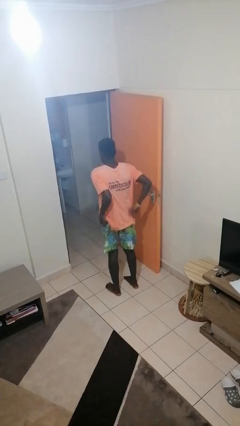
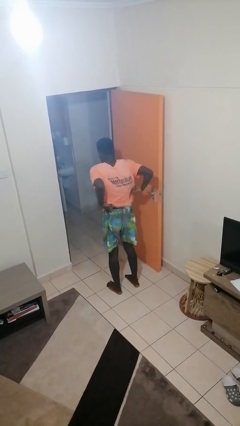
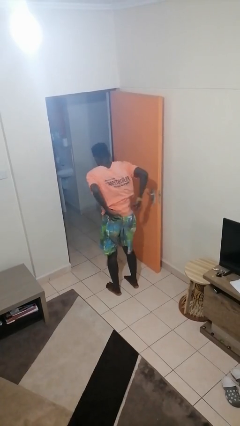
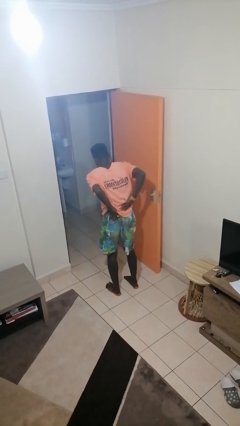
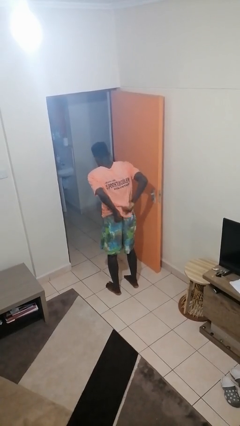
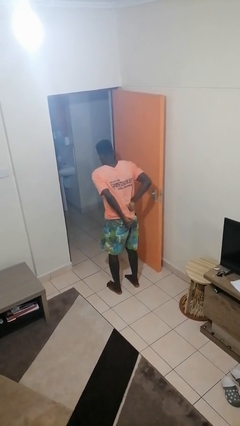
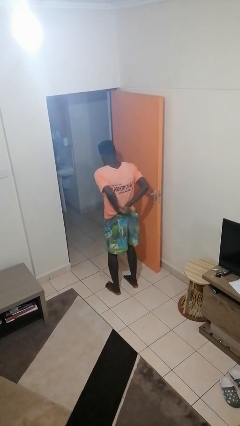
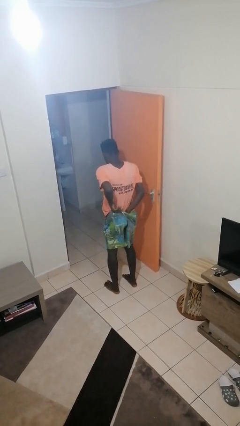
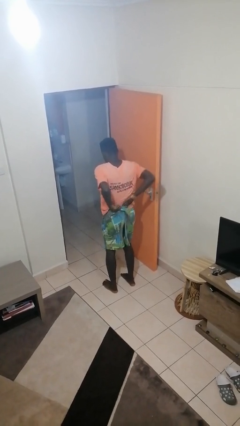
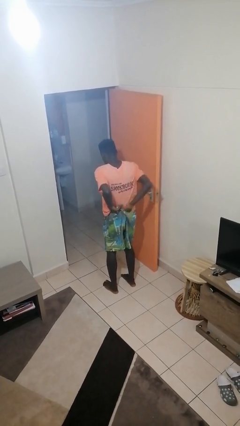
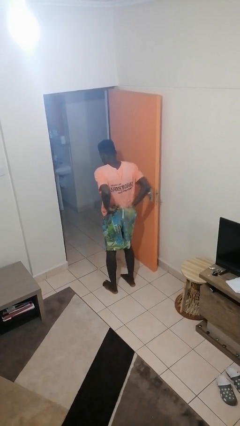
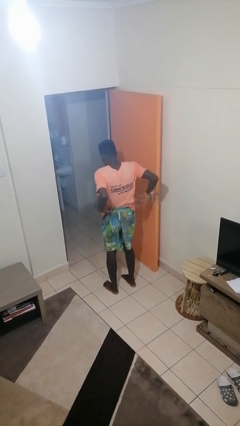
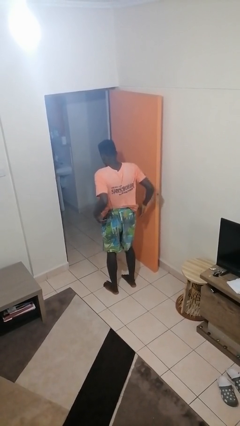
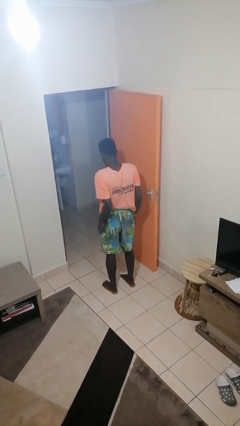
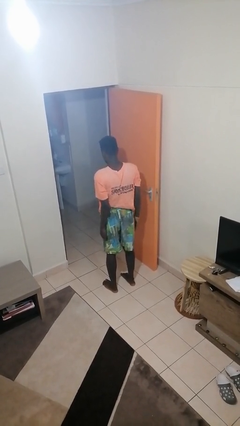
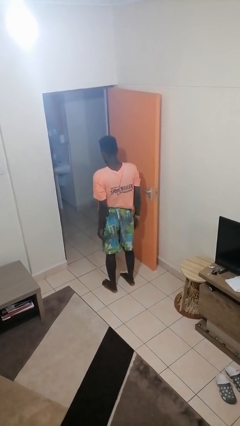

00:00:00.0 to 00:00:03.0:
person tucks in shirt

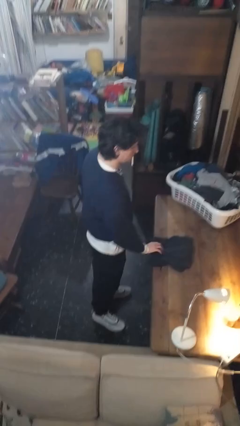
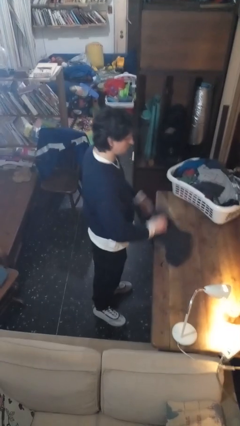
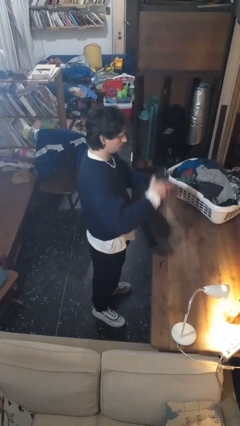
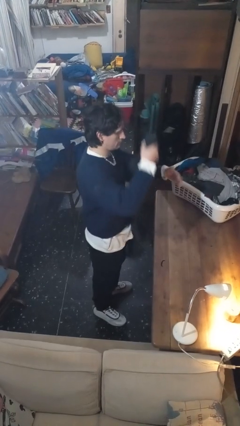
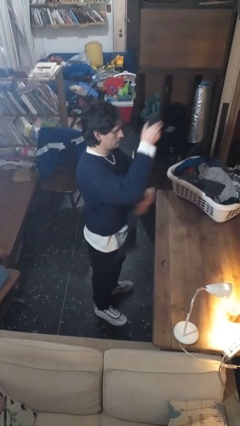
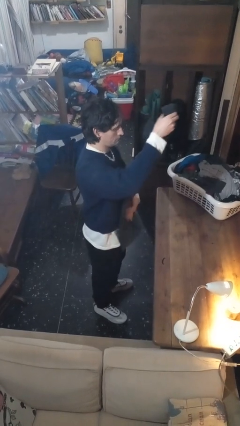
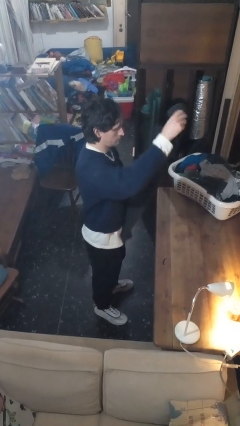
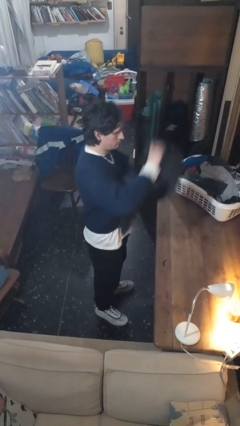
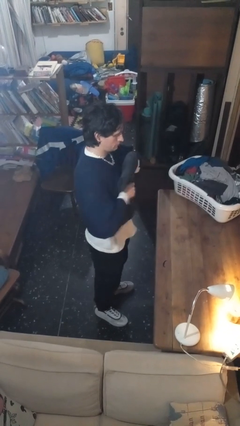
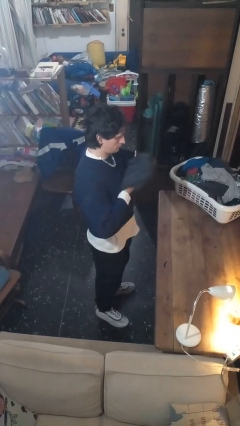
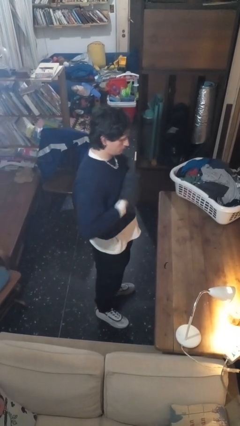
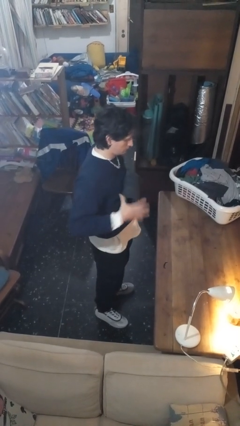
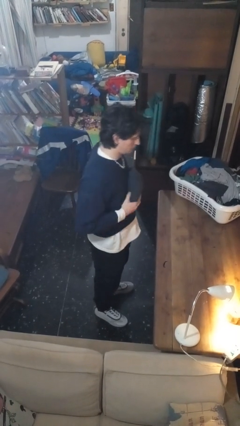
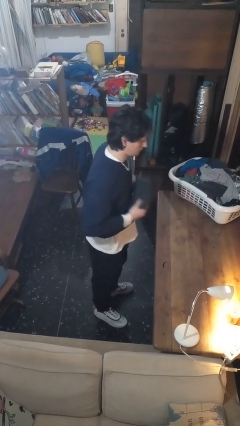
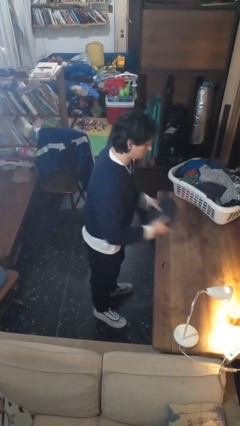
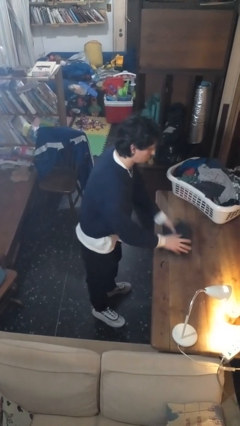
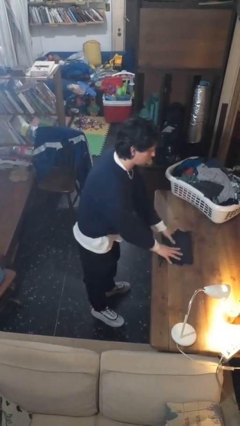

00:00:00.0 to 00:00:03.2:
person folds pants

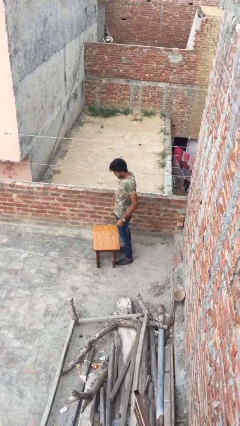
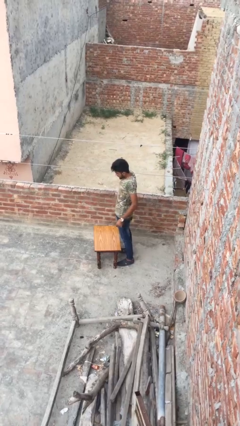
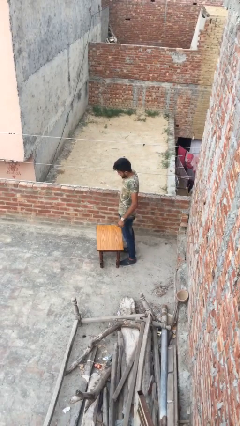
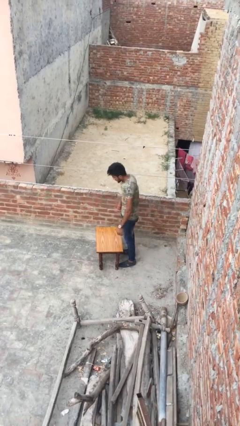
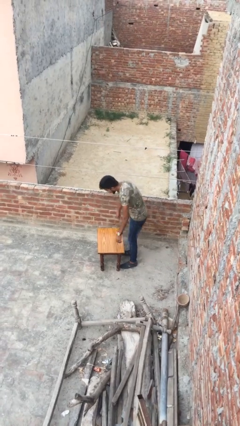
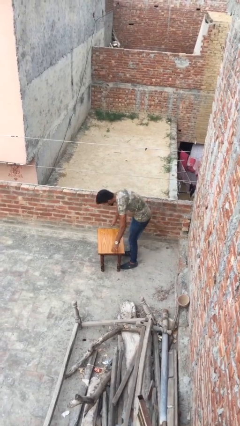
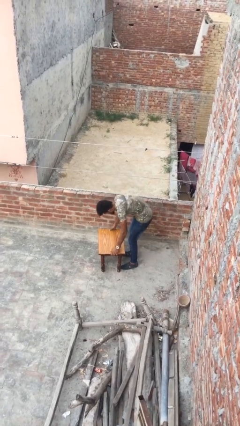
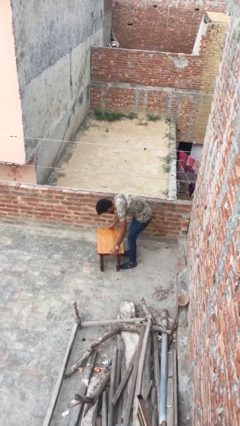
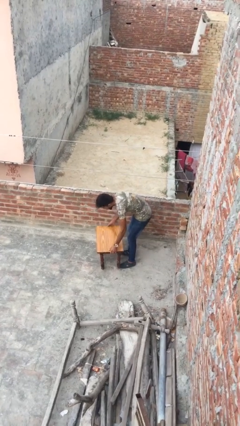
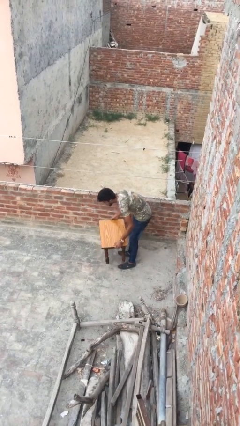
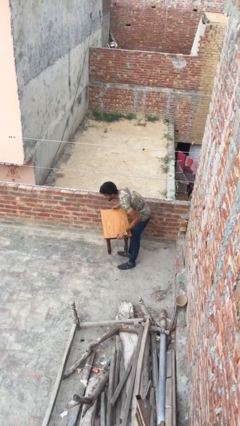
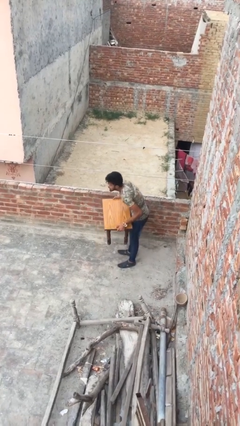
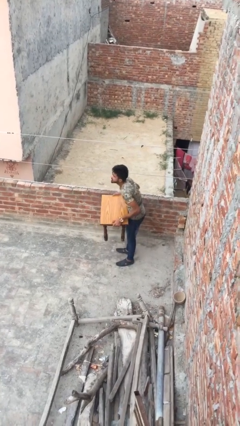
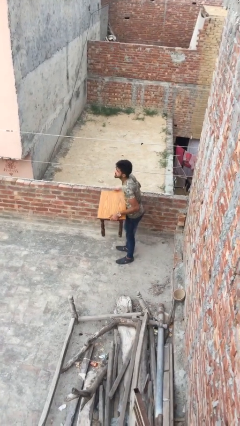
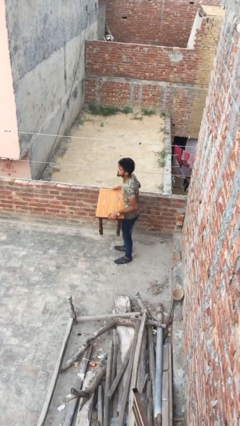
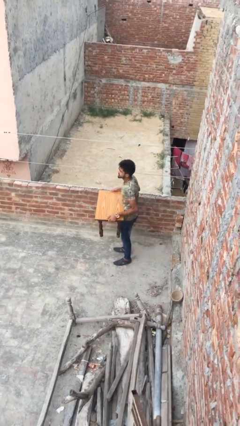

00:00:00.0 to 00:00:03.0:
person picks up object from floor

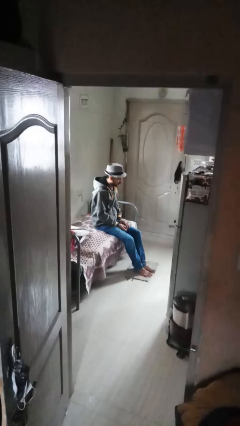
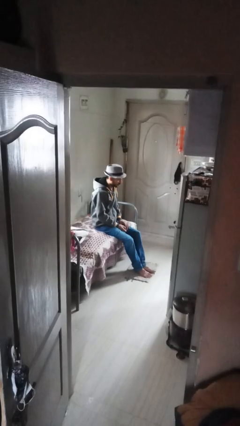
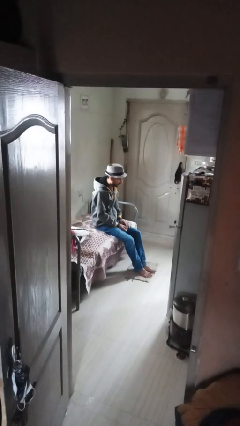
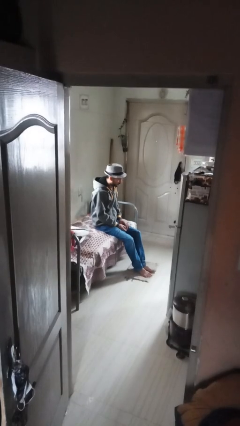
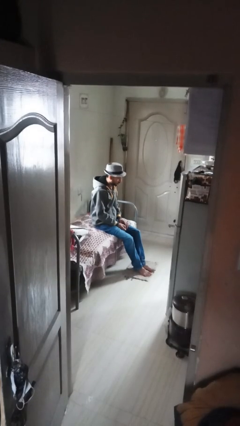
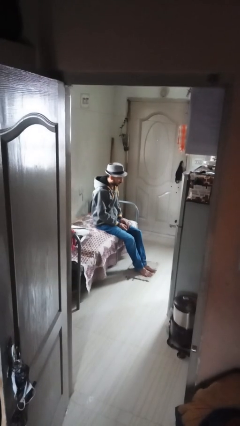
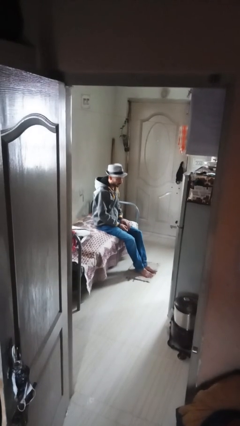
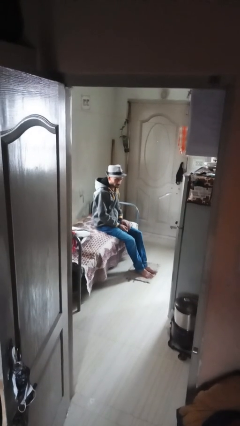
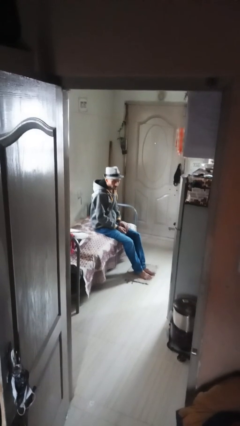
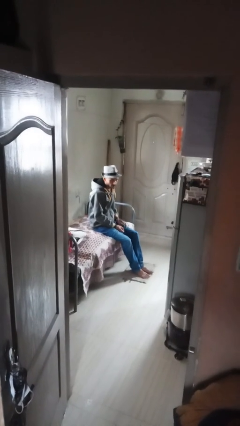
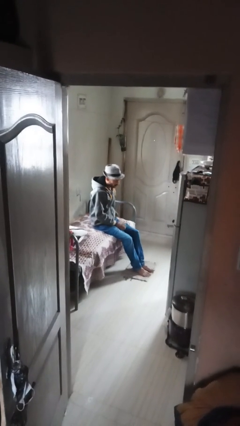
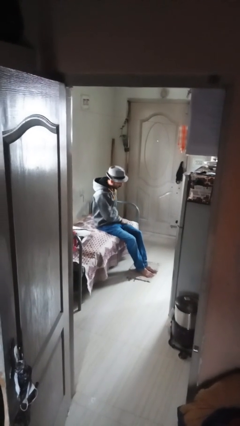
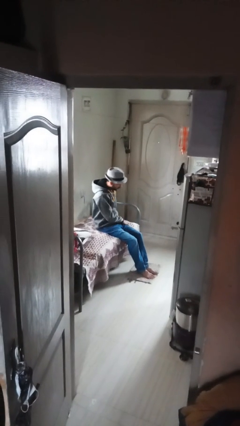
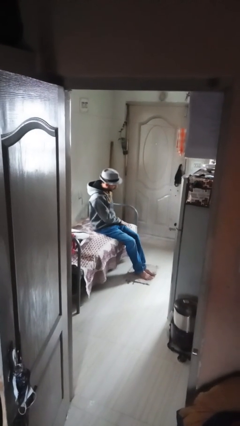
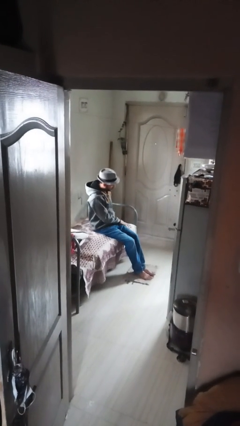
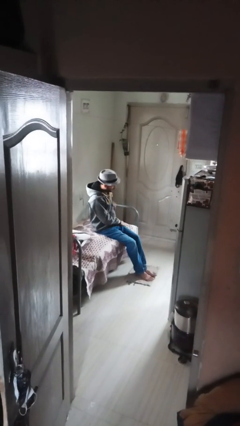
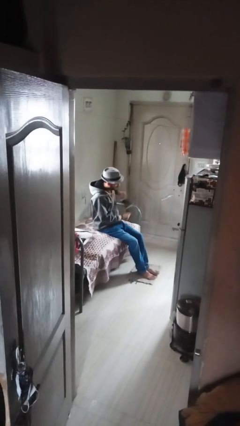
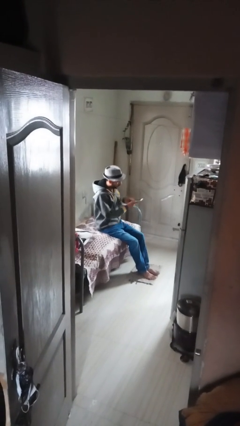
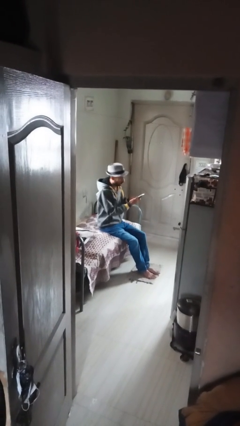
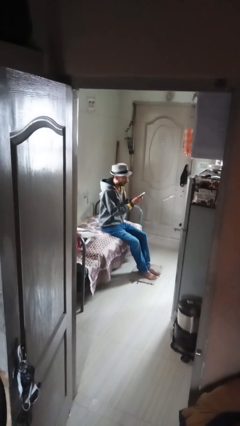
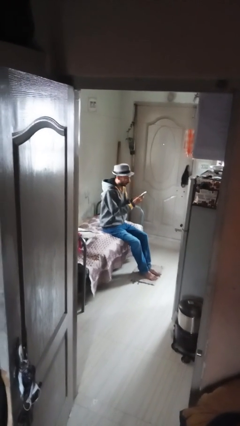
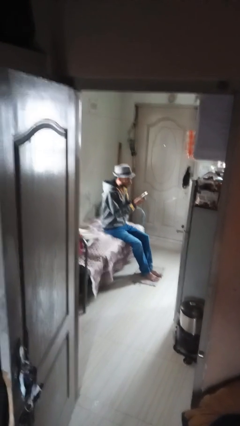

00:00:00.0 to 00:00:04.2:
person takes phone from pocket

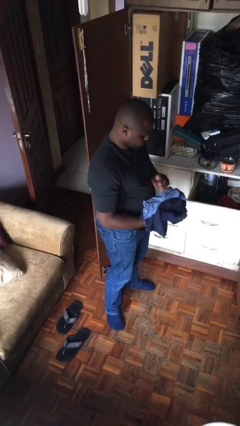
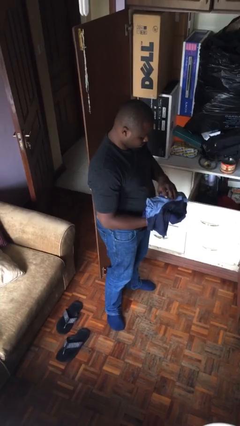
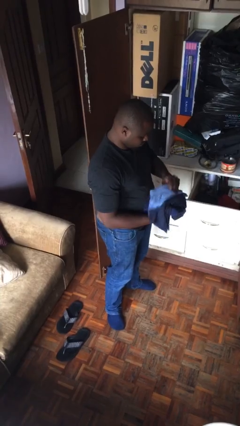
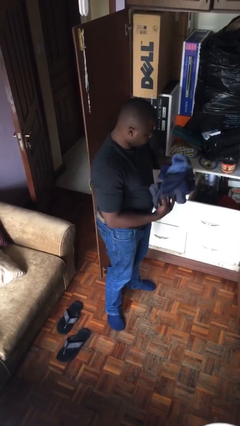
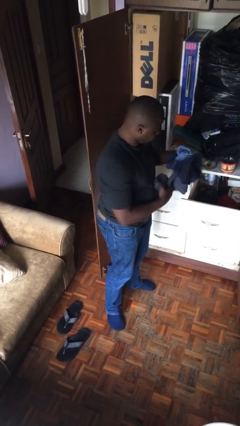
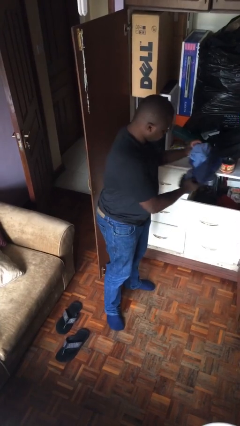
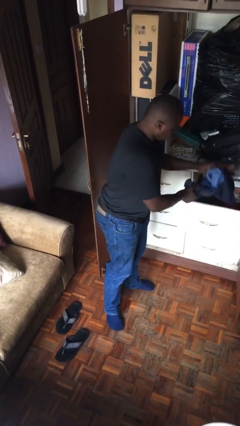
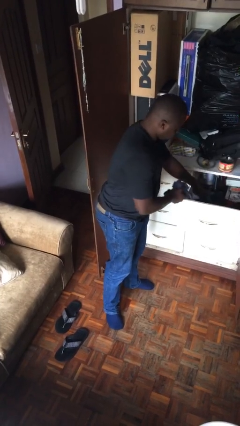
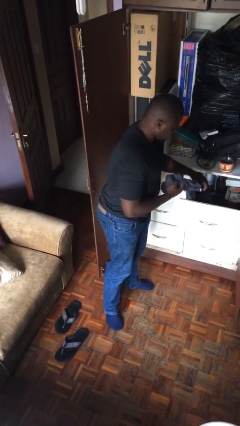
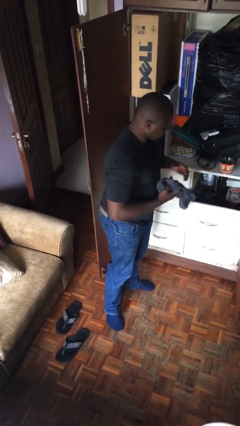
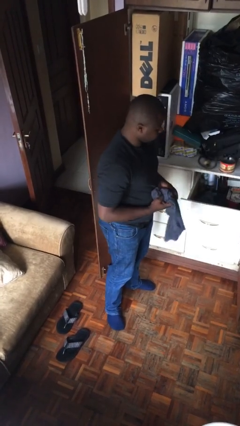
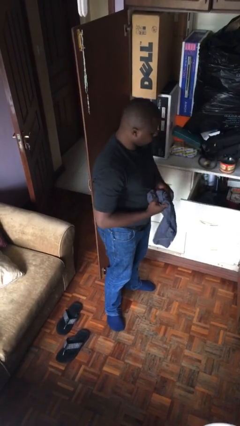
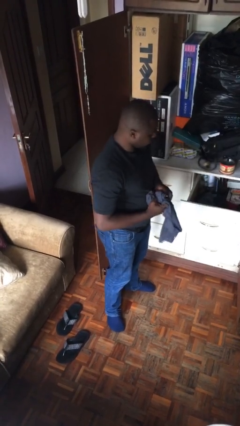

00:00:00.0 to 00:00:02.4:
person puts clothes into dresser

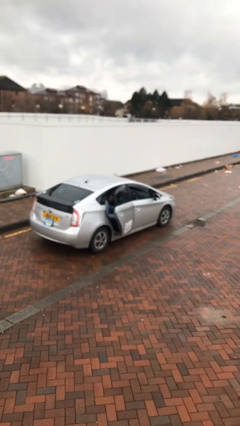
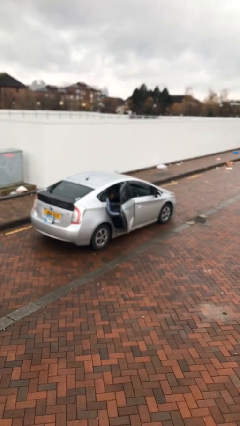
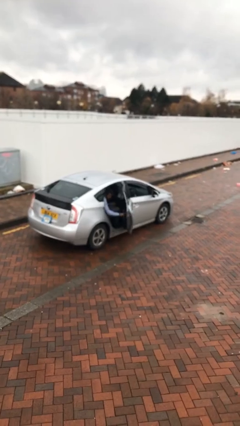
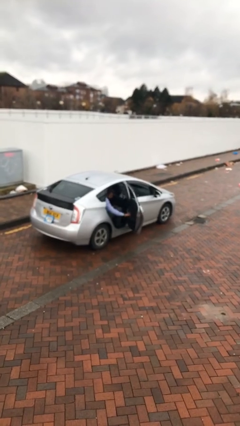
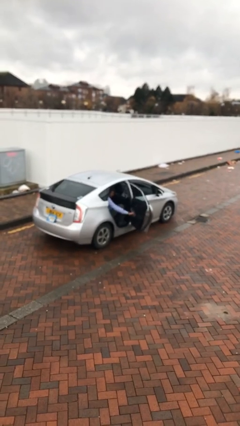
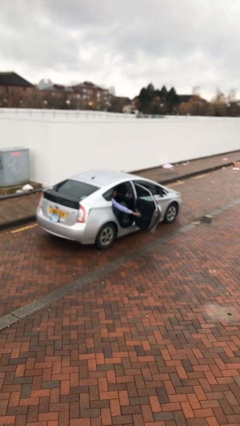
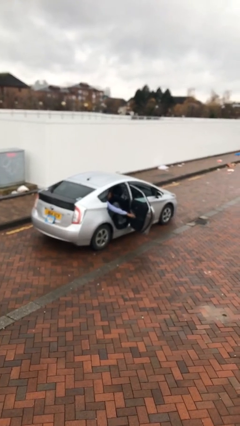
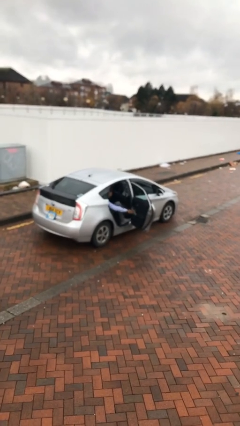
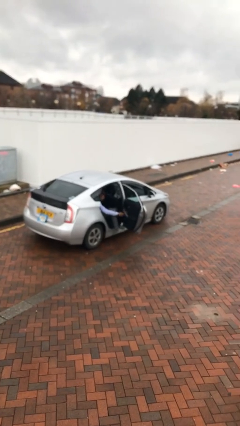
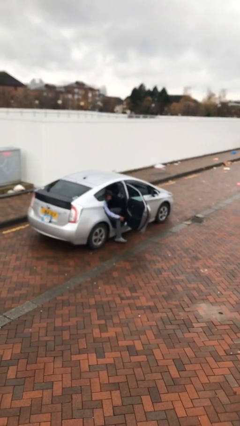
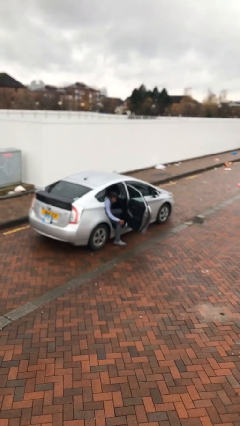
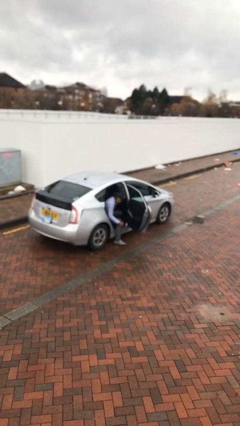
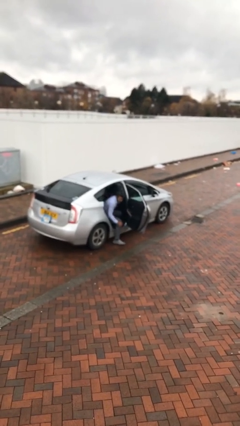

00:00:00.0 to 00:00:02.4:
person opens car door
